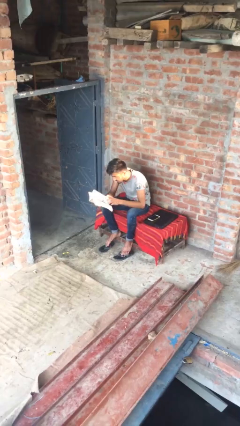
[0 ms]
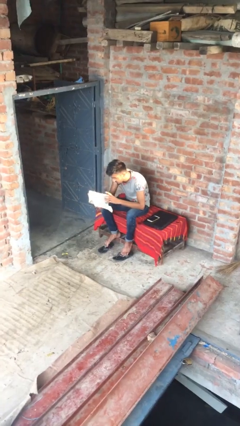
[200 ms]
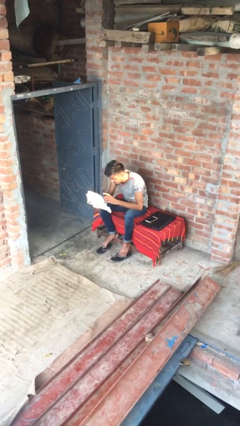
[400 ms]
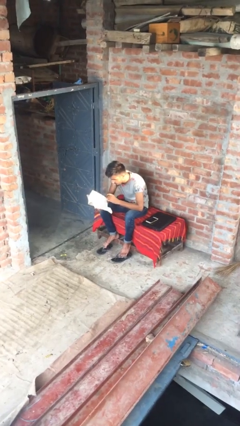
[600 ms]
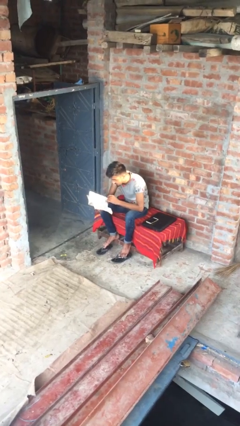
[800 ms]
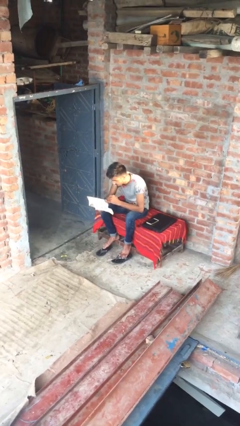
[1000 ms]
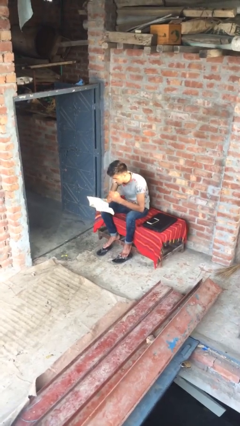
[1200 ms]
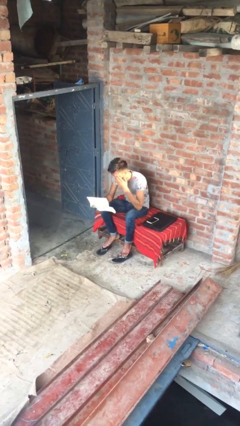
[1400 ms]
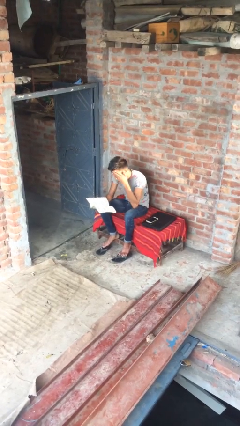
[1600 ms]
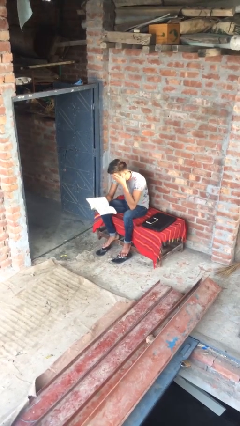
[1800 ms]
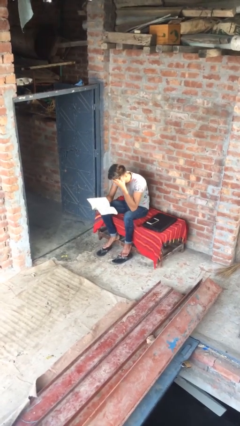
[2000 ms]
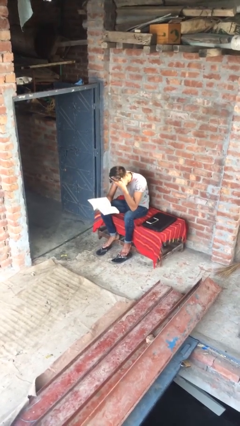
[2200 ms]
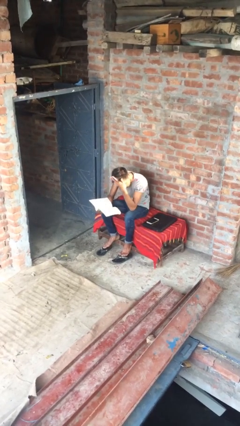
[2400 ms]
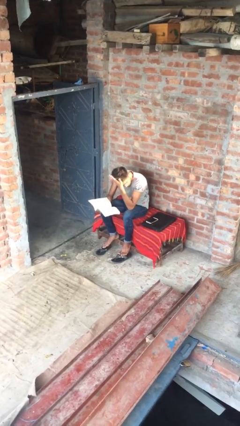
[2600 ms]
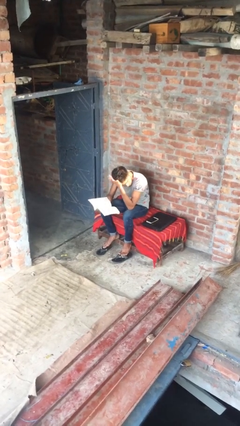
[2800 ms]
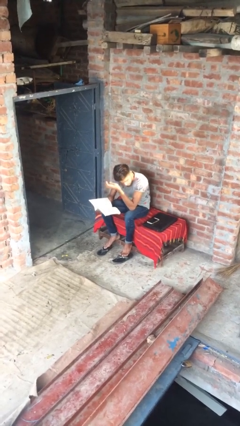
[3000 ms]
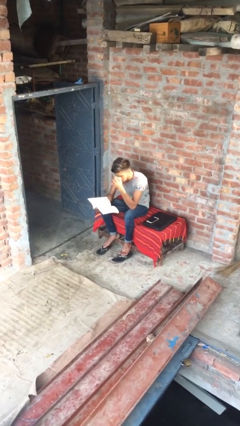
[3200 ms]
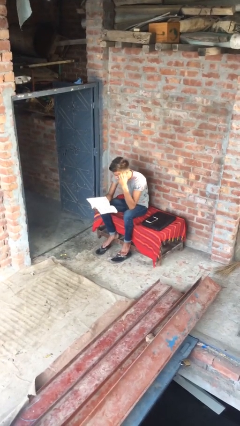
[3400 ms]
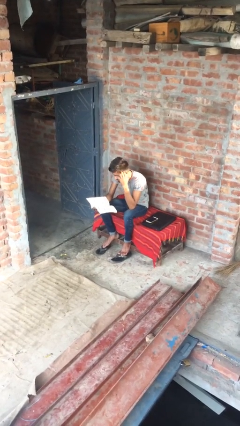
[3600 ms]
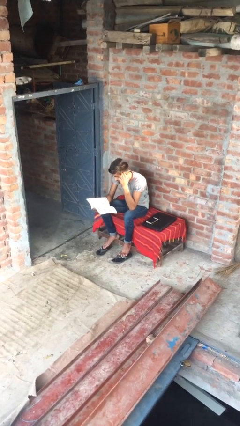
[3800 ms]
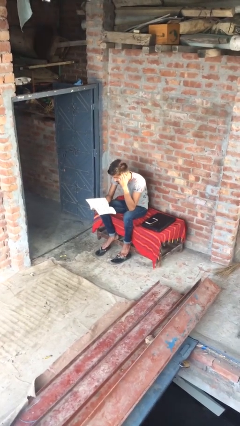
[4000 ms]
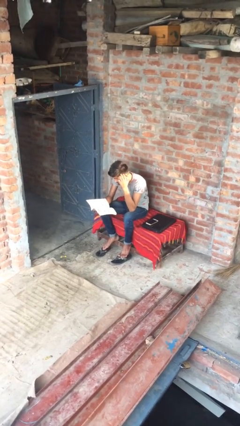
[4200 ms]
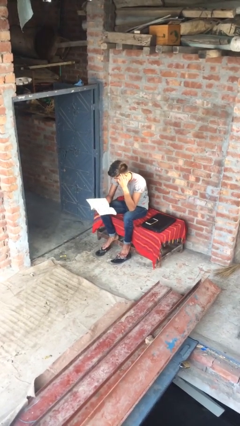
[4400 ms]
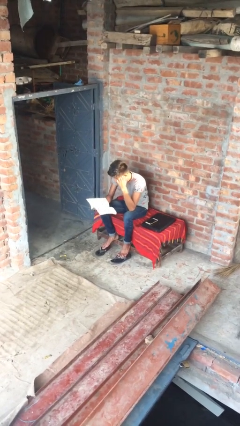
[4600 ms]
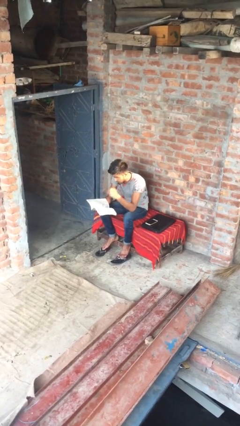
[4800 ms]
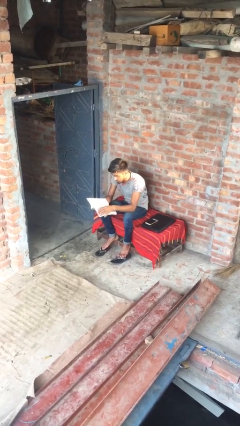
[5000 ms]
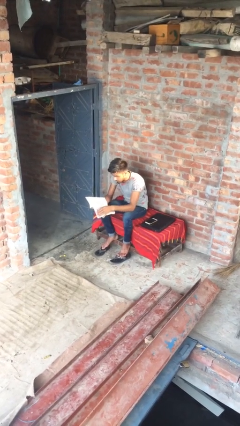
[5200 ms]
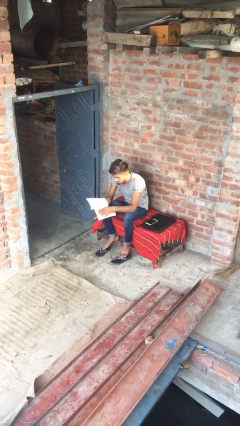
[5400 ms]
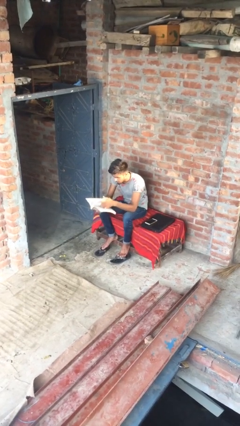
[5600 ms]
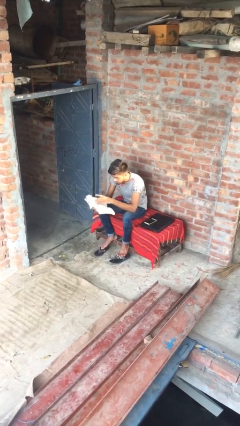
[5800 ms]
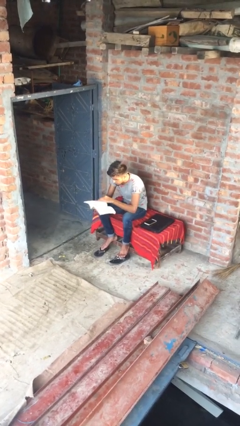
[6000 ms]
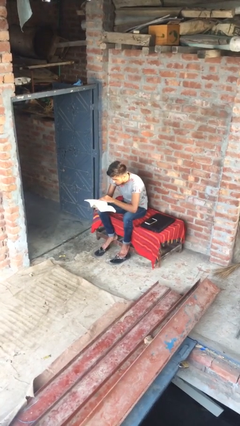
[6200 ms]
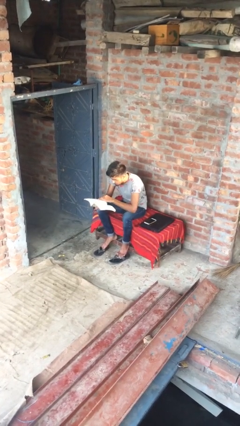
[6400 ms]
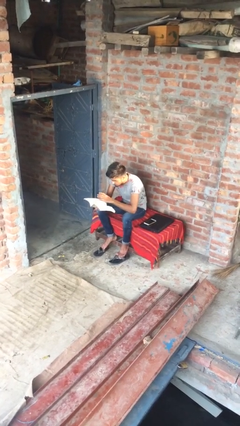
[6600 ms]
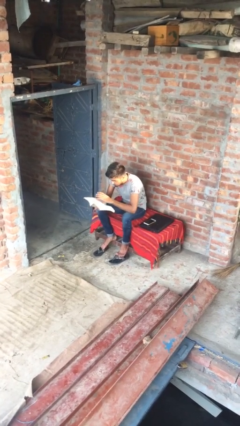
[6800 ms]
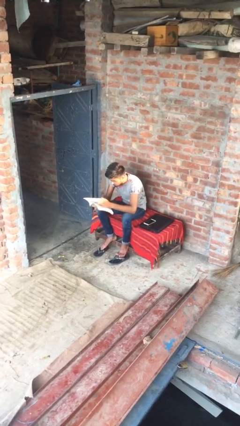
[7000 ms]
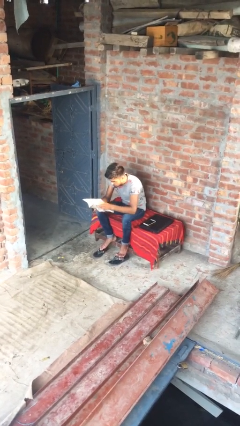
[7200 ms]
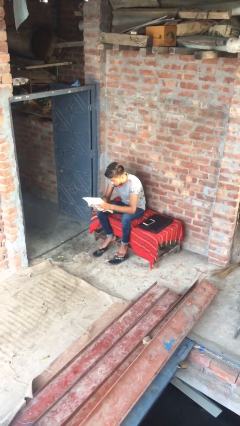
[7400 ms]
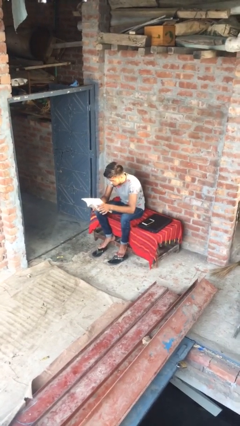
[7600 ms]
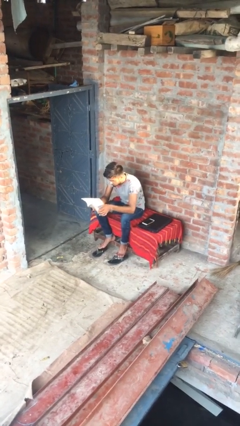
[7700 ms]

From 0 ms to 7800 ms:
person reads document

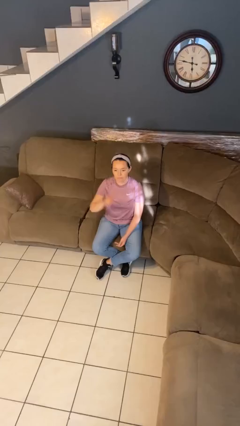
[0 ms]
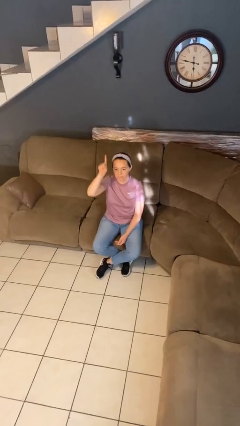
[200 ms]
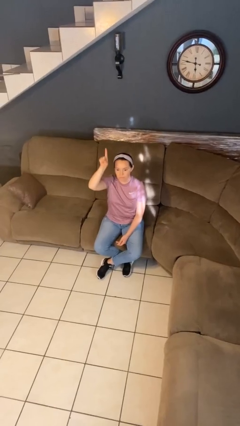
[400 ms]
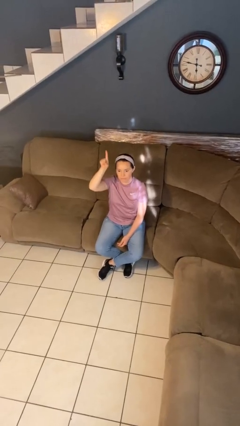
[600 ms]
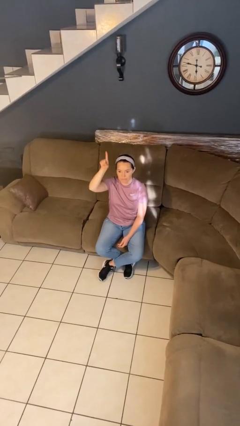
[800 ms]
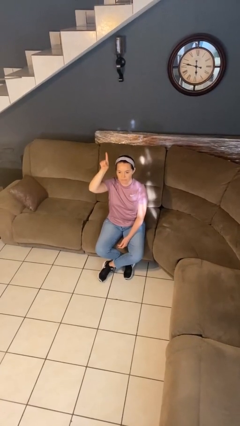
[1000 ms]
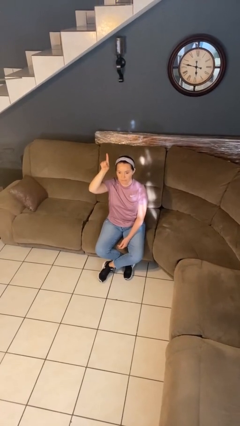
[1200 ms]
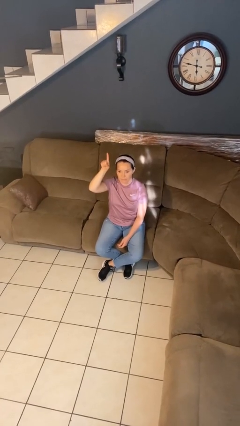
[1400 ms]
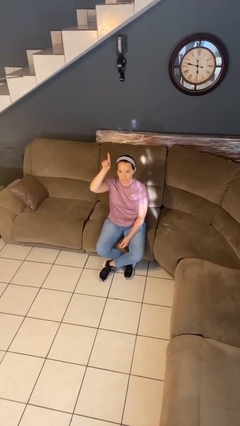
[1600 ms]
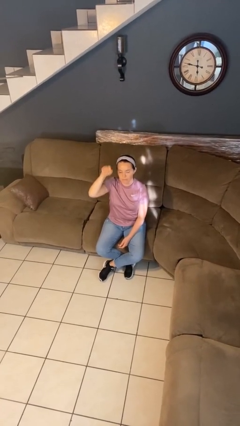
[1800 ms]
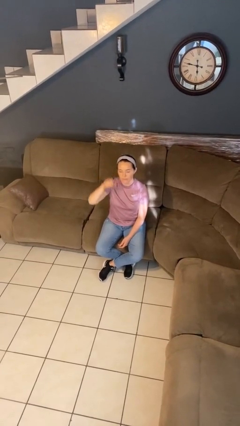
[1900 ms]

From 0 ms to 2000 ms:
person gestures number one

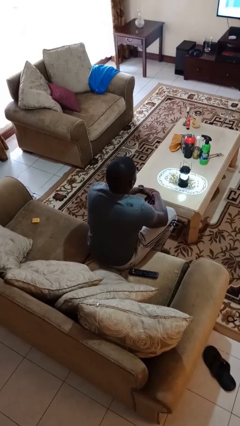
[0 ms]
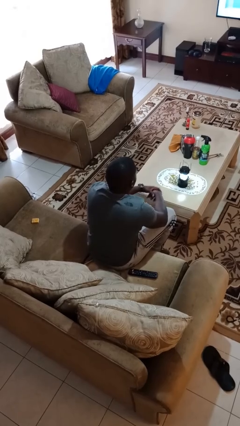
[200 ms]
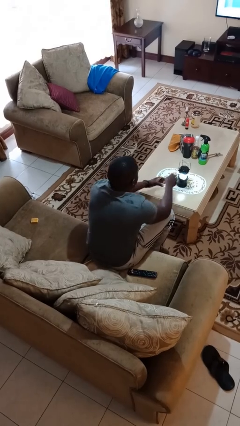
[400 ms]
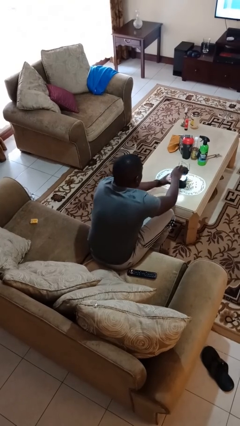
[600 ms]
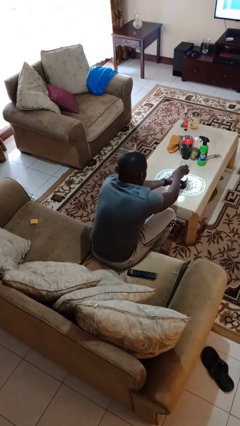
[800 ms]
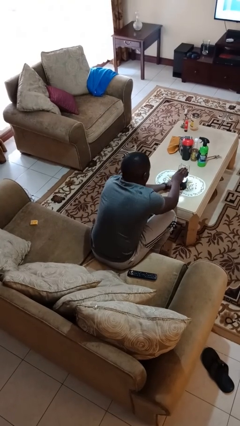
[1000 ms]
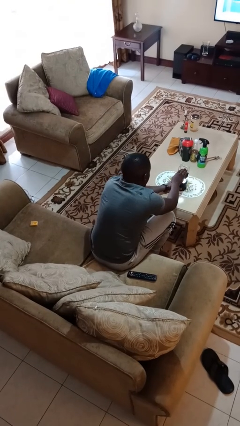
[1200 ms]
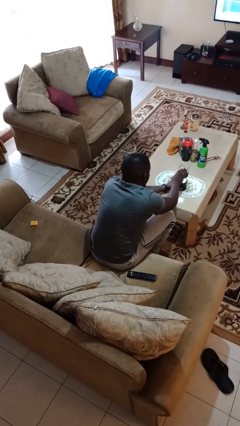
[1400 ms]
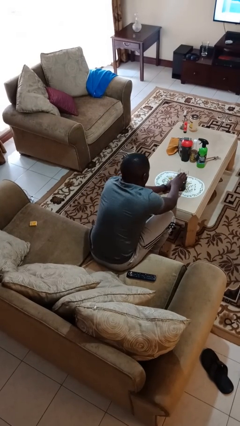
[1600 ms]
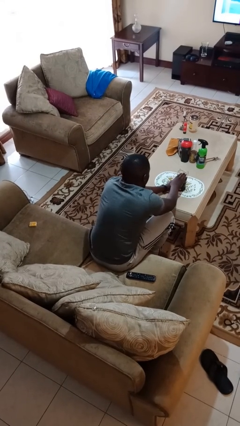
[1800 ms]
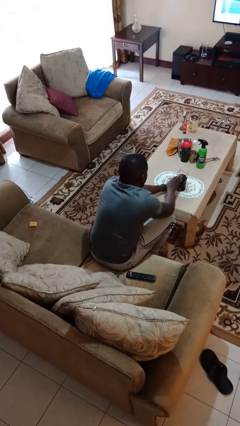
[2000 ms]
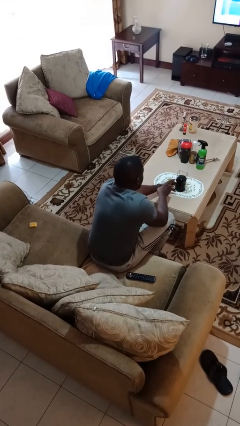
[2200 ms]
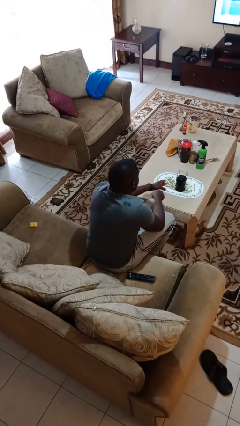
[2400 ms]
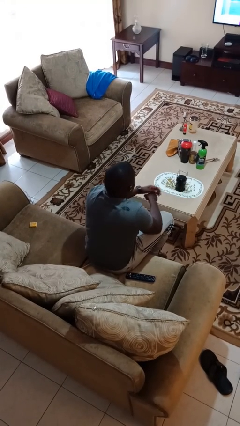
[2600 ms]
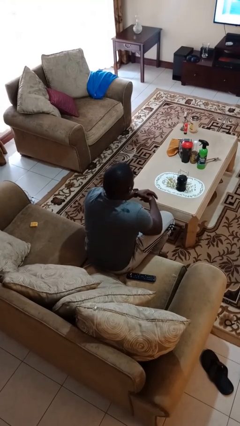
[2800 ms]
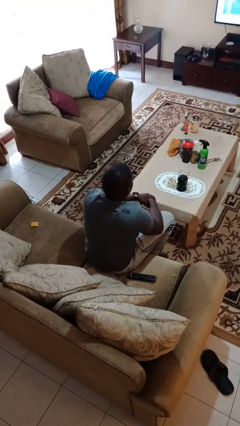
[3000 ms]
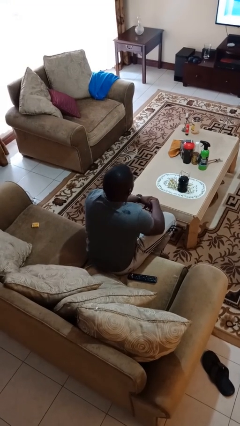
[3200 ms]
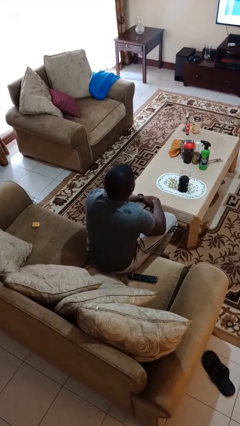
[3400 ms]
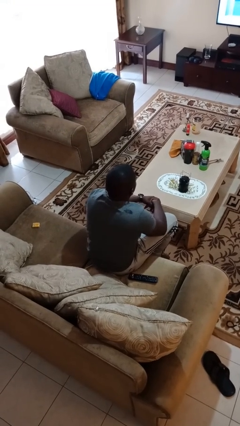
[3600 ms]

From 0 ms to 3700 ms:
person turns off lamp

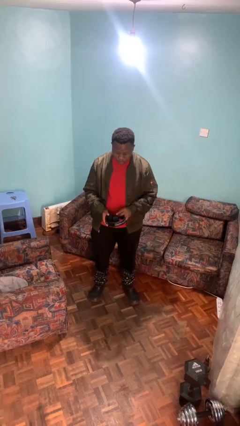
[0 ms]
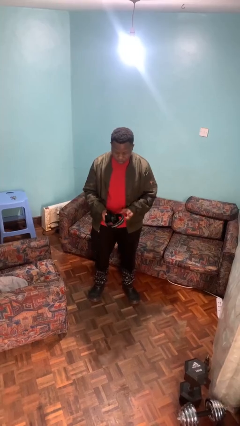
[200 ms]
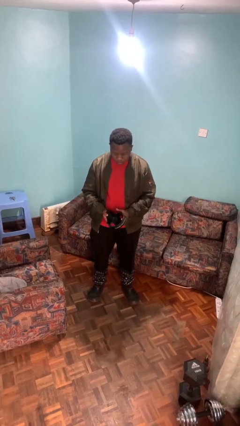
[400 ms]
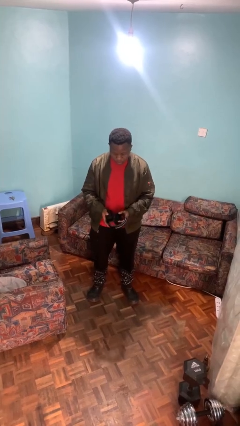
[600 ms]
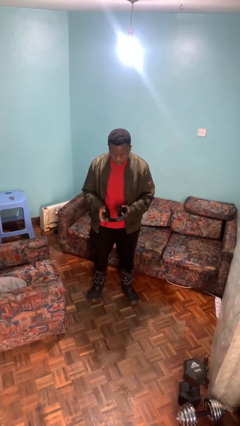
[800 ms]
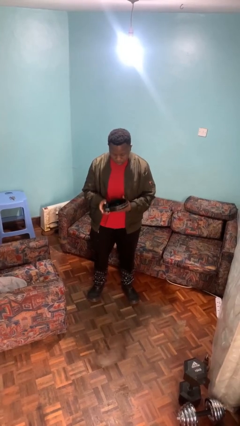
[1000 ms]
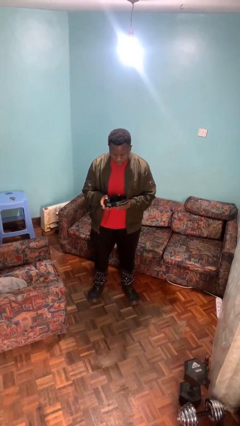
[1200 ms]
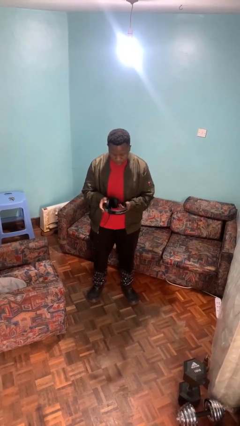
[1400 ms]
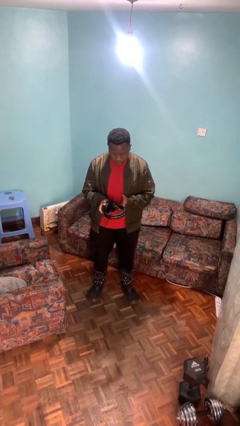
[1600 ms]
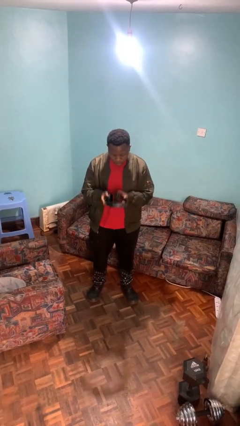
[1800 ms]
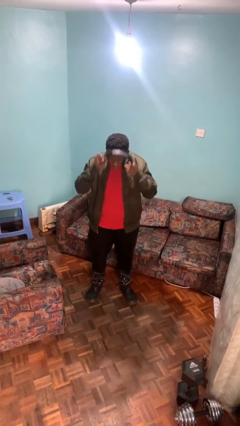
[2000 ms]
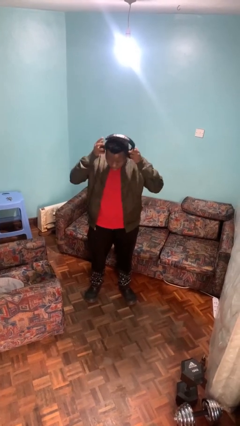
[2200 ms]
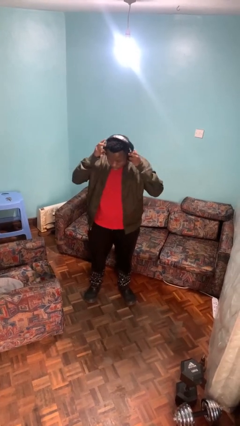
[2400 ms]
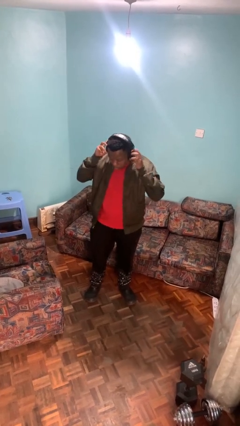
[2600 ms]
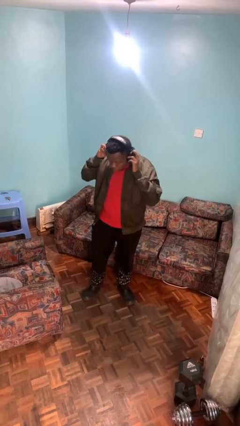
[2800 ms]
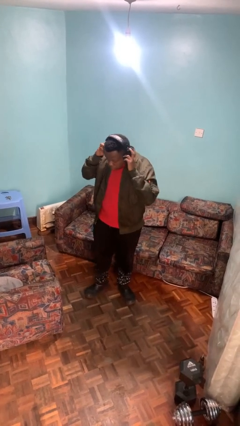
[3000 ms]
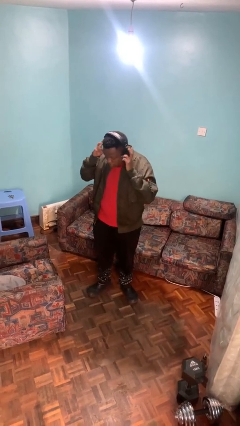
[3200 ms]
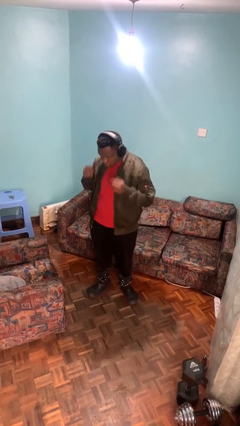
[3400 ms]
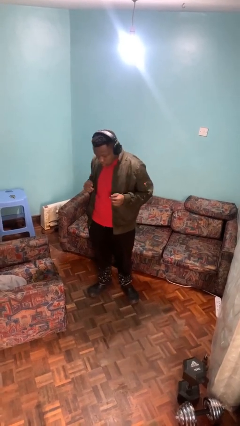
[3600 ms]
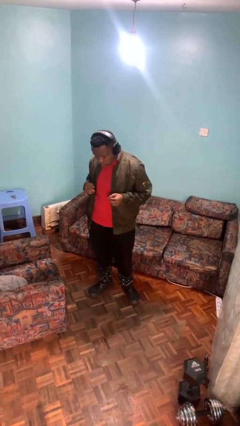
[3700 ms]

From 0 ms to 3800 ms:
person puts on headphones

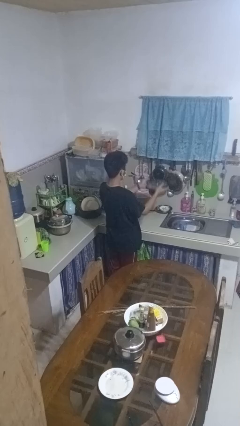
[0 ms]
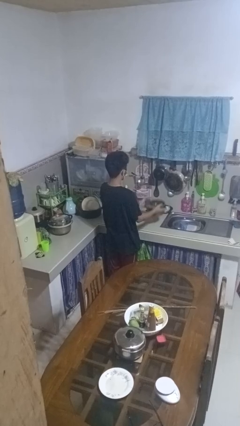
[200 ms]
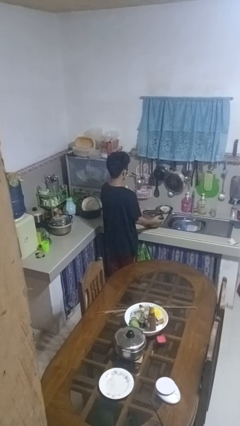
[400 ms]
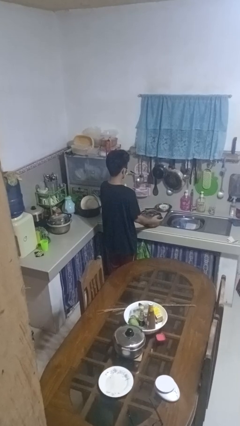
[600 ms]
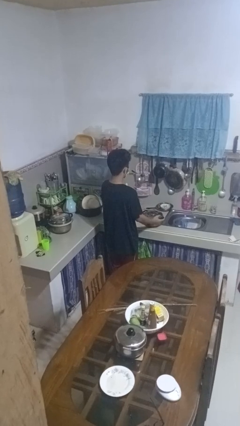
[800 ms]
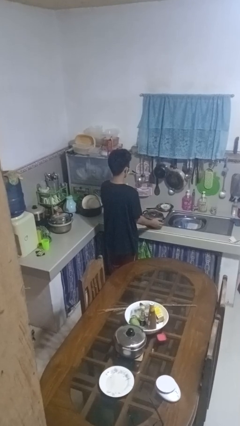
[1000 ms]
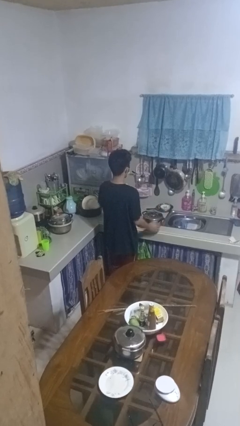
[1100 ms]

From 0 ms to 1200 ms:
person puts down object on countertop
